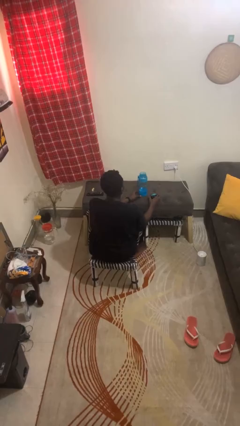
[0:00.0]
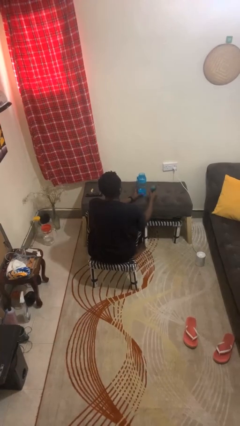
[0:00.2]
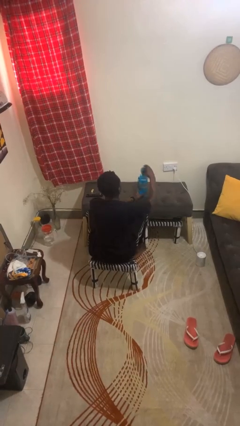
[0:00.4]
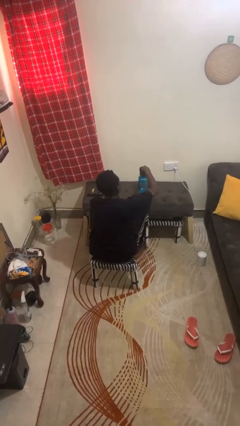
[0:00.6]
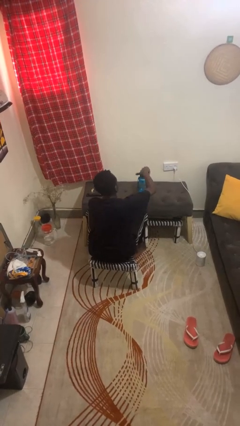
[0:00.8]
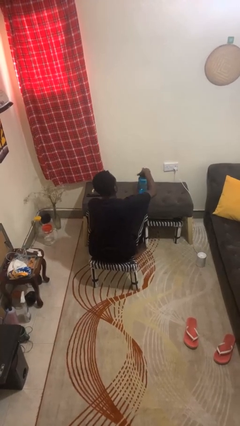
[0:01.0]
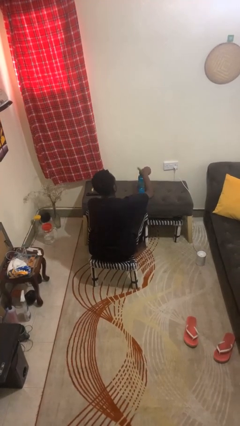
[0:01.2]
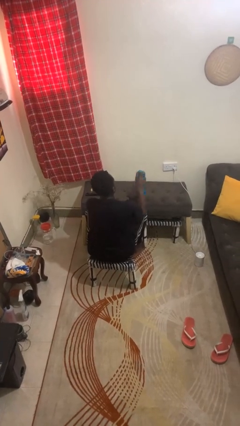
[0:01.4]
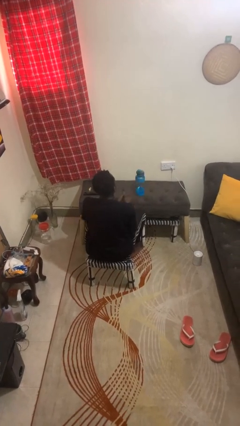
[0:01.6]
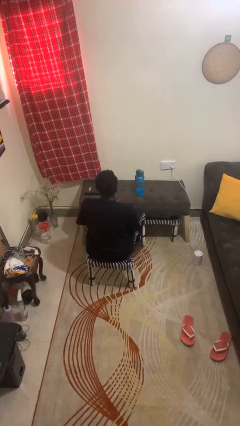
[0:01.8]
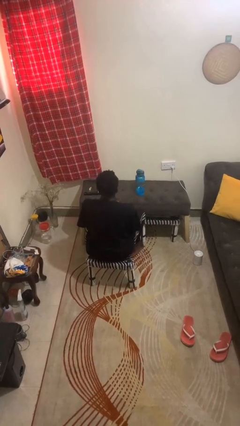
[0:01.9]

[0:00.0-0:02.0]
person closes jar

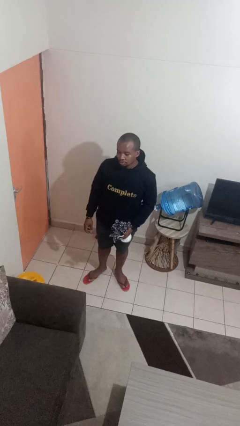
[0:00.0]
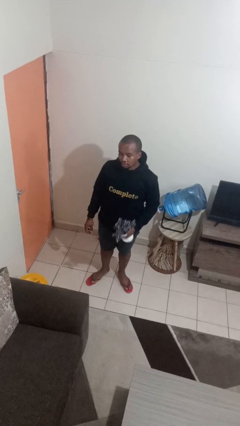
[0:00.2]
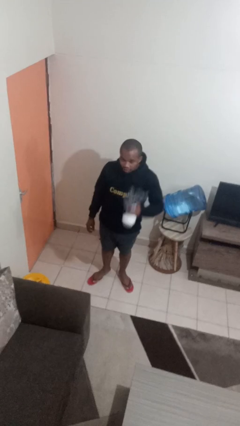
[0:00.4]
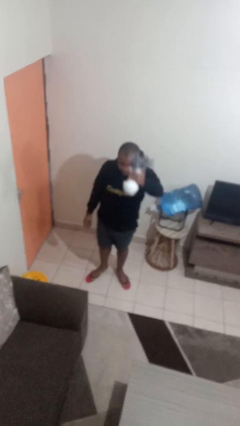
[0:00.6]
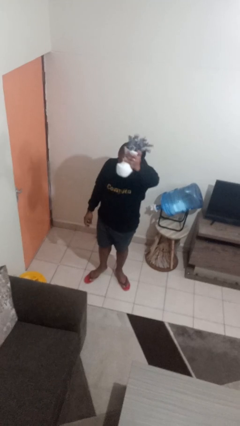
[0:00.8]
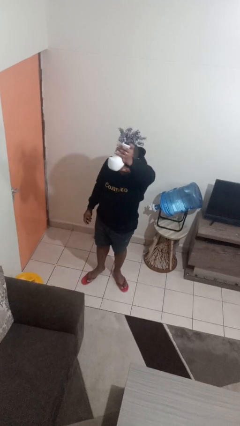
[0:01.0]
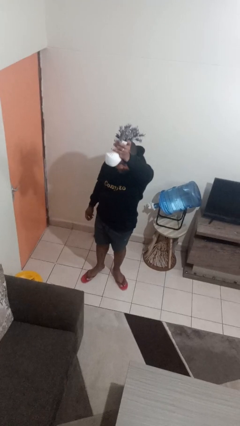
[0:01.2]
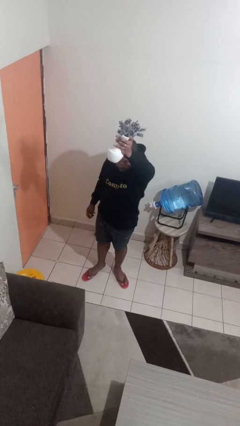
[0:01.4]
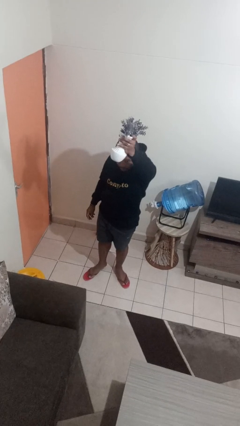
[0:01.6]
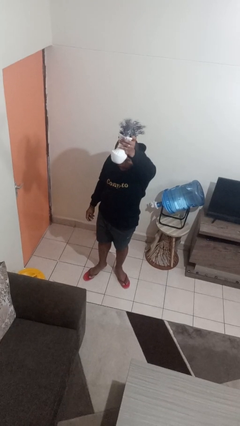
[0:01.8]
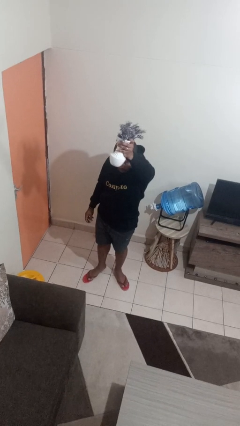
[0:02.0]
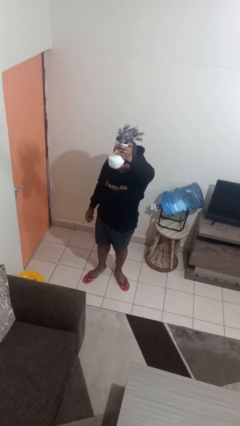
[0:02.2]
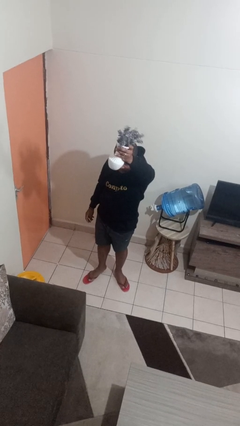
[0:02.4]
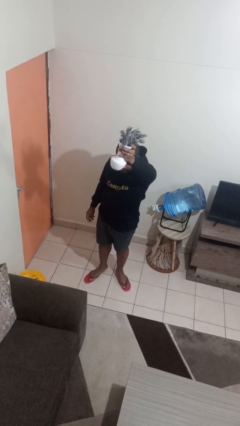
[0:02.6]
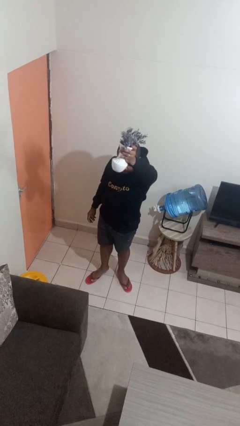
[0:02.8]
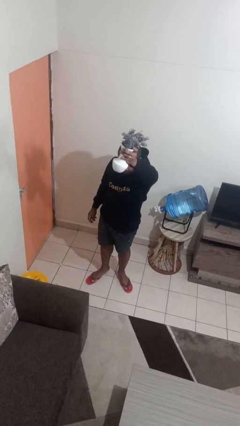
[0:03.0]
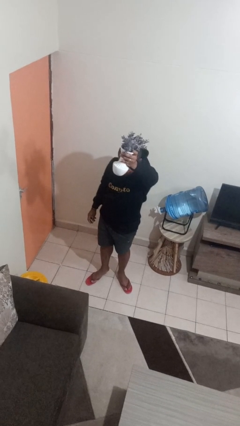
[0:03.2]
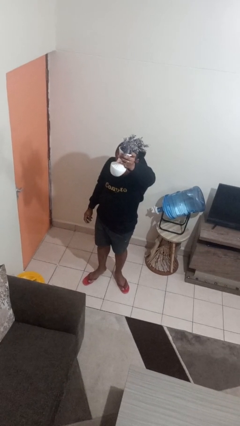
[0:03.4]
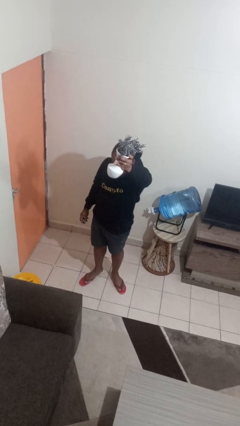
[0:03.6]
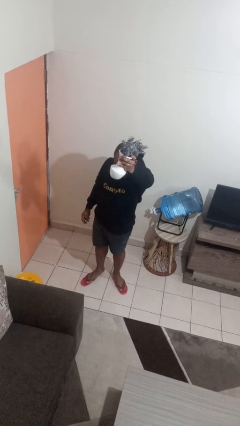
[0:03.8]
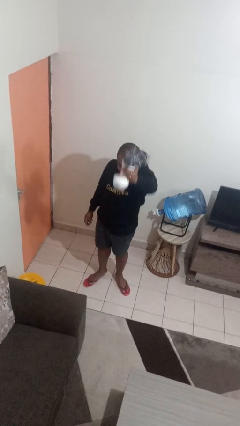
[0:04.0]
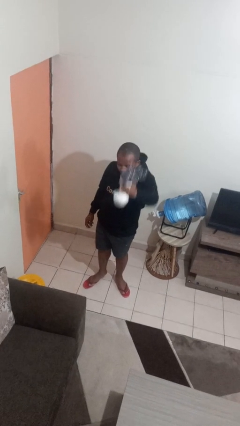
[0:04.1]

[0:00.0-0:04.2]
person holds object above head

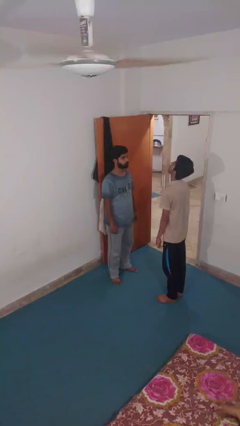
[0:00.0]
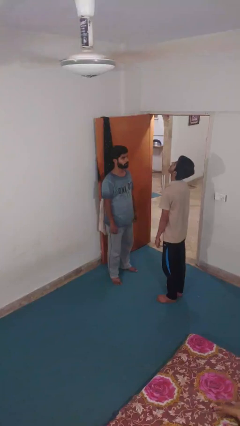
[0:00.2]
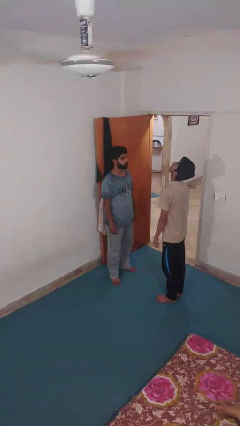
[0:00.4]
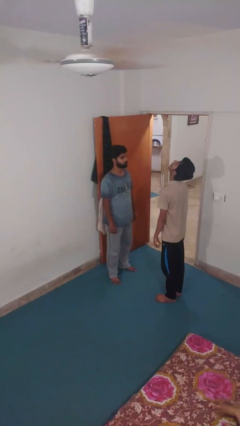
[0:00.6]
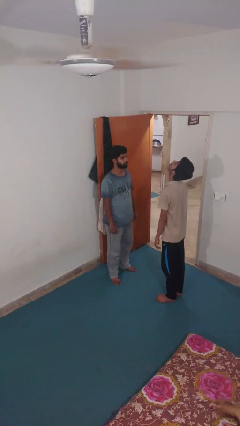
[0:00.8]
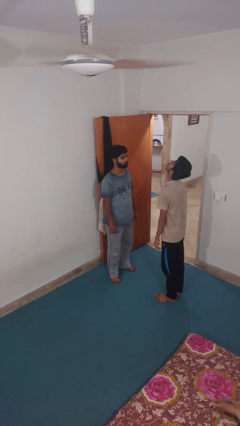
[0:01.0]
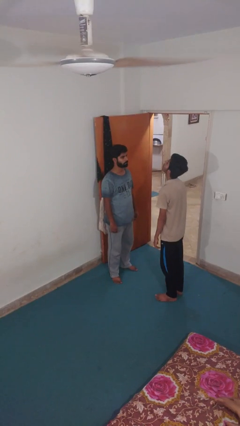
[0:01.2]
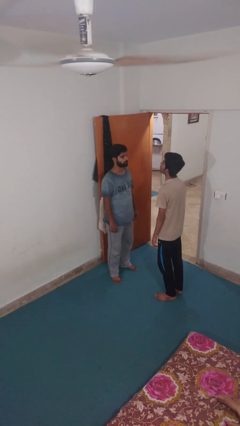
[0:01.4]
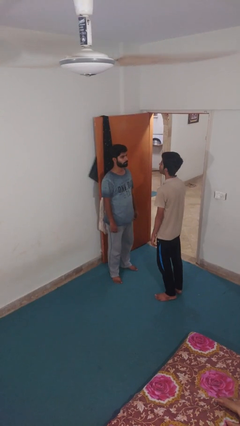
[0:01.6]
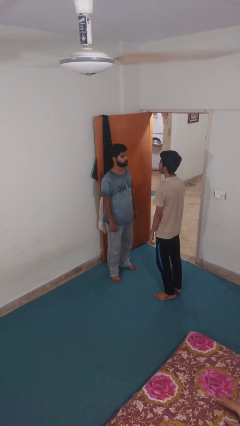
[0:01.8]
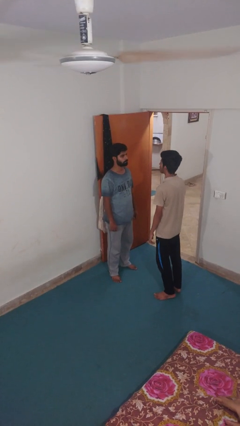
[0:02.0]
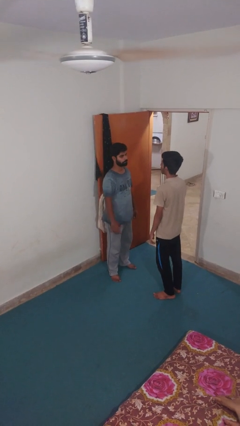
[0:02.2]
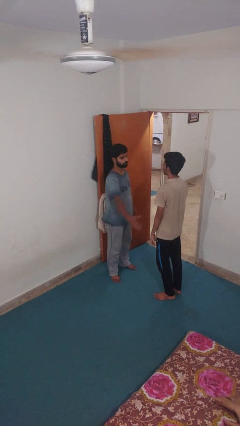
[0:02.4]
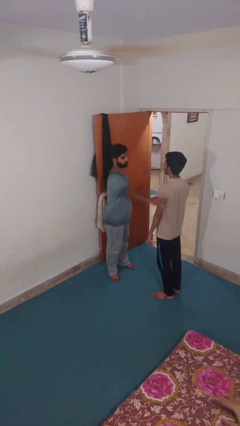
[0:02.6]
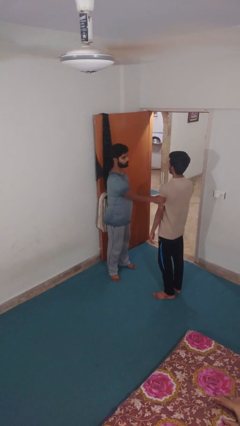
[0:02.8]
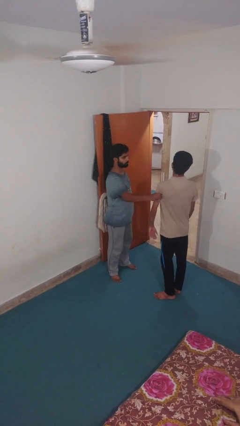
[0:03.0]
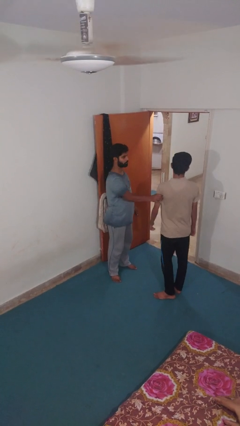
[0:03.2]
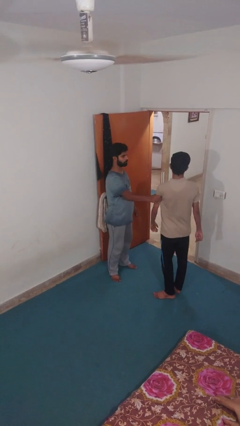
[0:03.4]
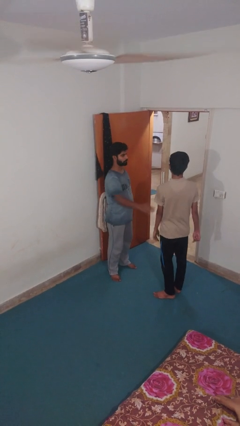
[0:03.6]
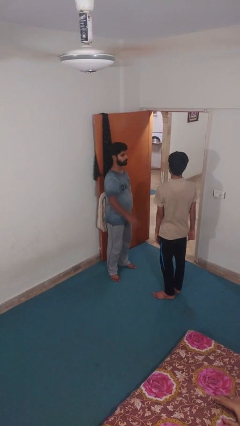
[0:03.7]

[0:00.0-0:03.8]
person grabs person by bicep

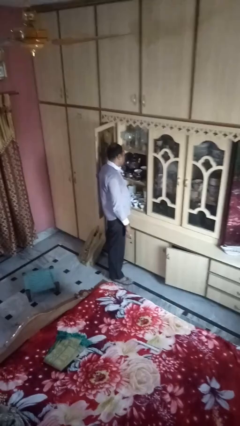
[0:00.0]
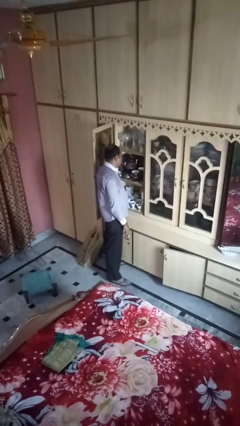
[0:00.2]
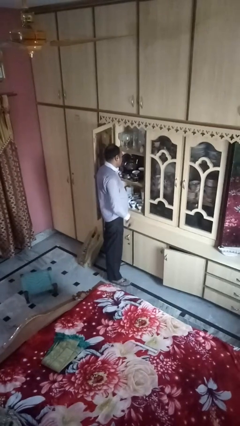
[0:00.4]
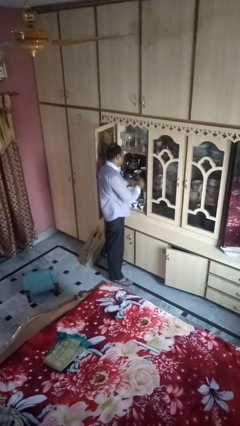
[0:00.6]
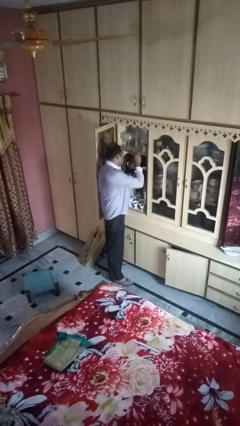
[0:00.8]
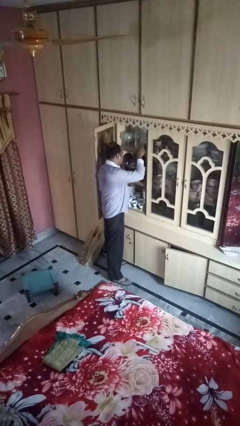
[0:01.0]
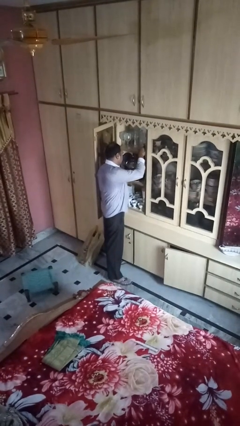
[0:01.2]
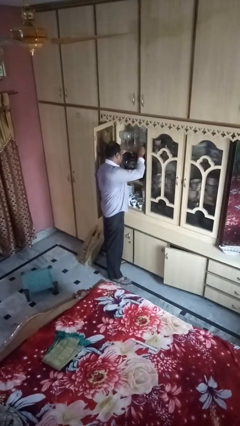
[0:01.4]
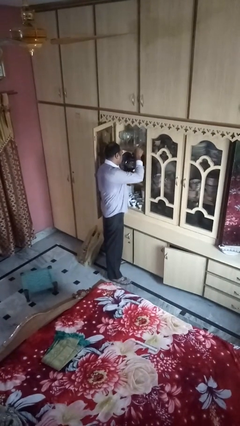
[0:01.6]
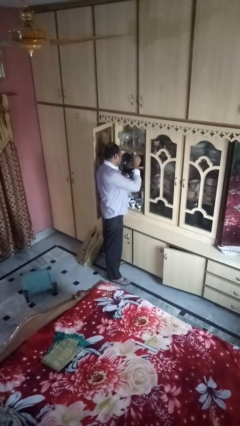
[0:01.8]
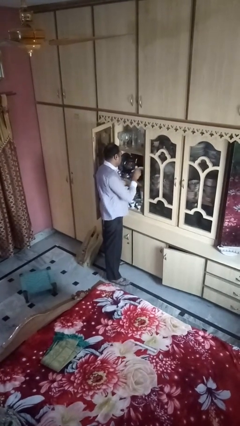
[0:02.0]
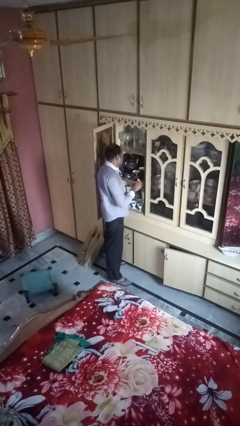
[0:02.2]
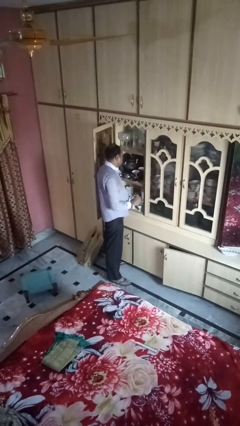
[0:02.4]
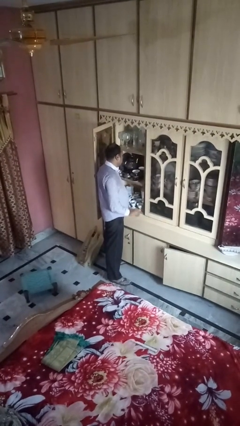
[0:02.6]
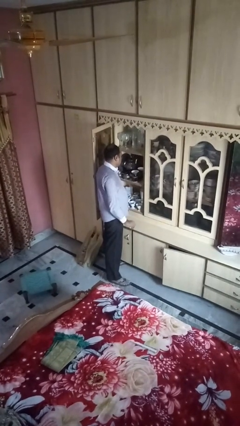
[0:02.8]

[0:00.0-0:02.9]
person picks up object from shelf

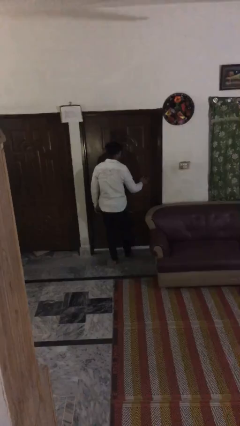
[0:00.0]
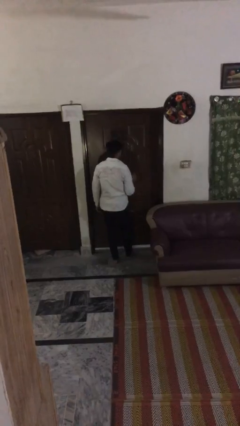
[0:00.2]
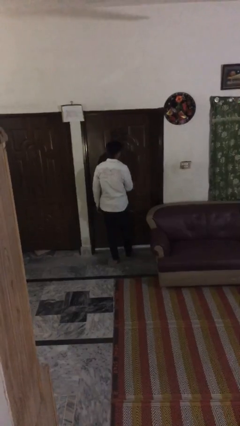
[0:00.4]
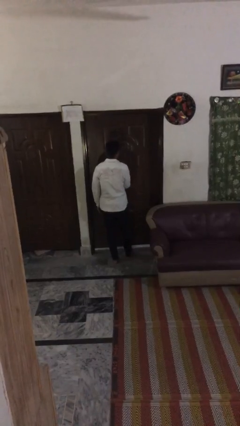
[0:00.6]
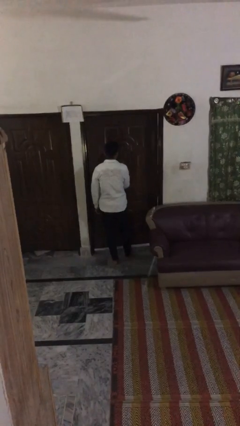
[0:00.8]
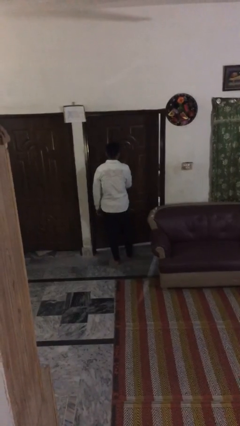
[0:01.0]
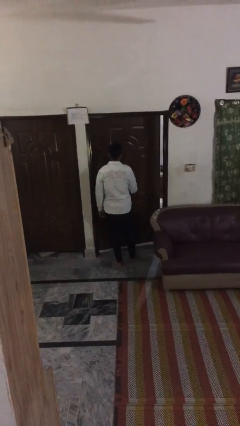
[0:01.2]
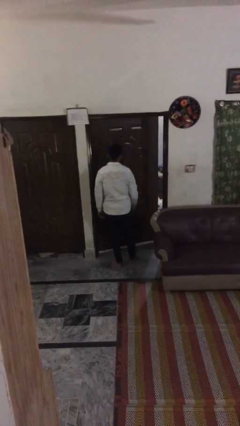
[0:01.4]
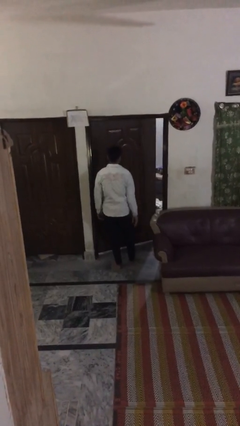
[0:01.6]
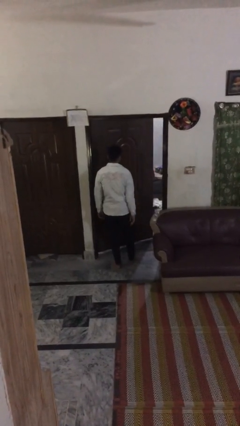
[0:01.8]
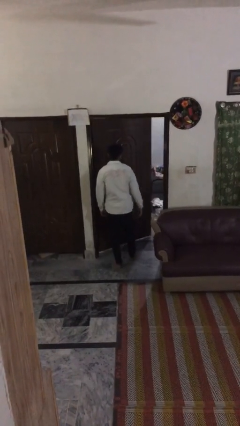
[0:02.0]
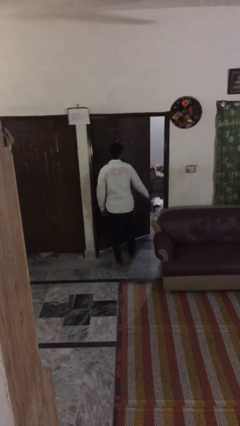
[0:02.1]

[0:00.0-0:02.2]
person opens facility door

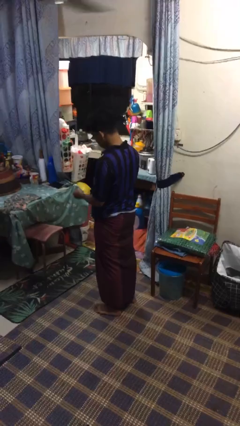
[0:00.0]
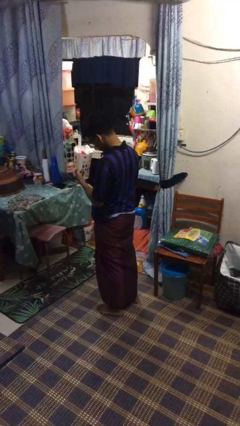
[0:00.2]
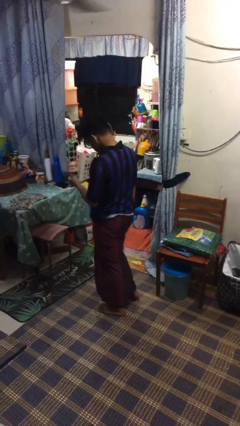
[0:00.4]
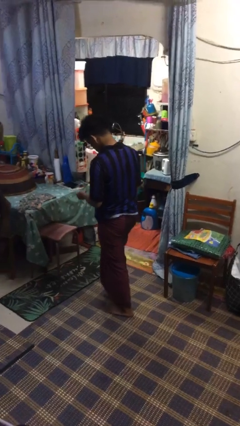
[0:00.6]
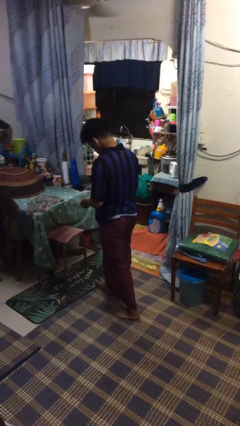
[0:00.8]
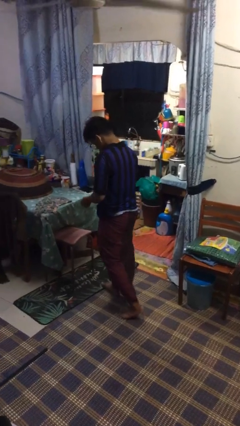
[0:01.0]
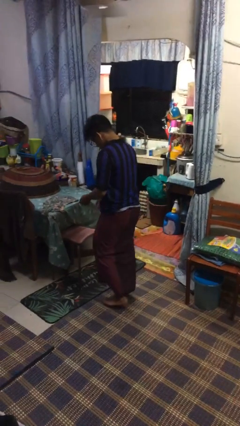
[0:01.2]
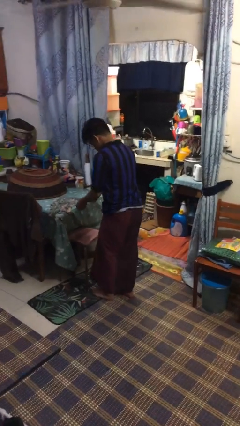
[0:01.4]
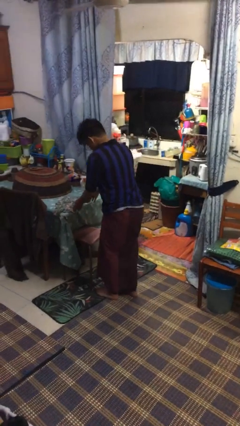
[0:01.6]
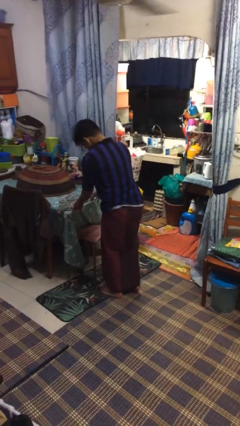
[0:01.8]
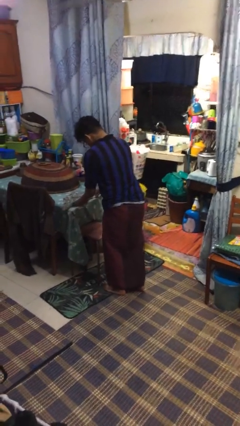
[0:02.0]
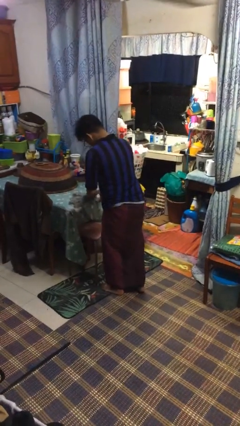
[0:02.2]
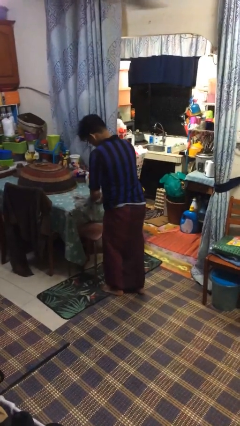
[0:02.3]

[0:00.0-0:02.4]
person picks up object from table
